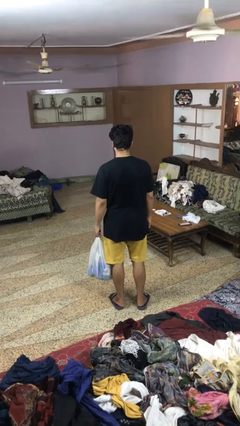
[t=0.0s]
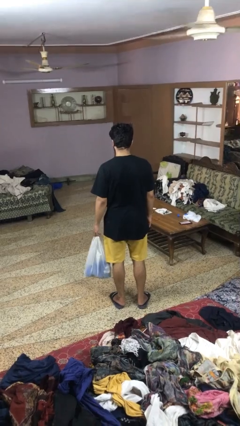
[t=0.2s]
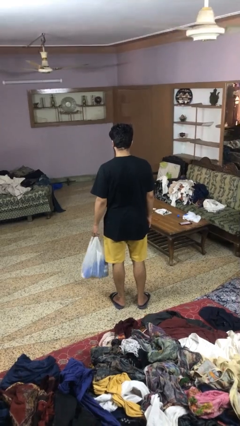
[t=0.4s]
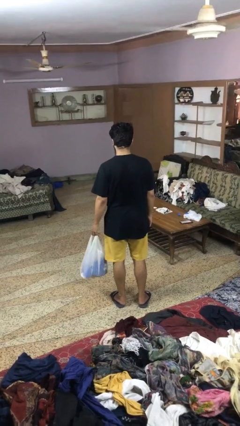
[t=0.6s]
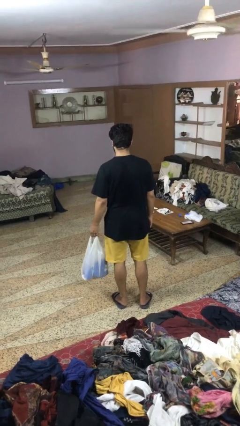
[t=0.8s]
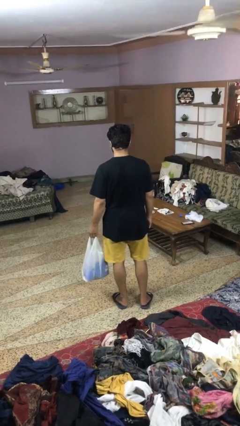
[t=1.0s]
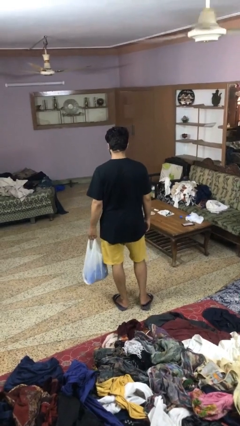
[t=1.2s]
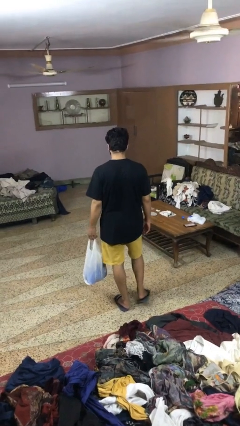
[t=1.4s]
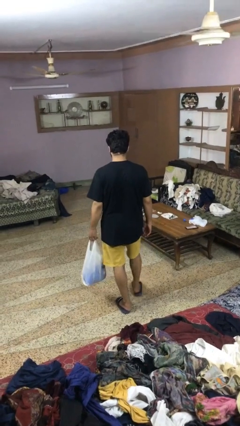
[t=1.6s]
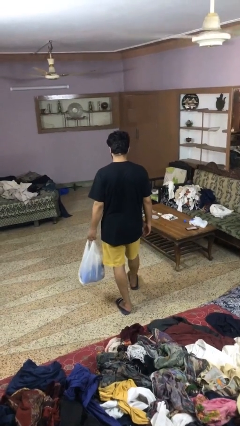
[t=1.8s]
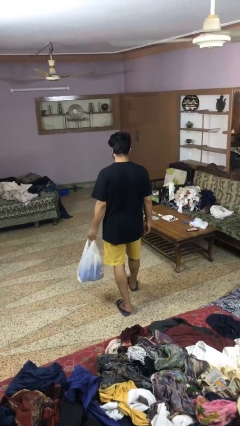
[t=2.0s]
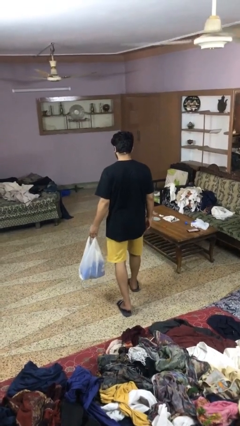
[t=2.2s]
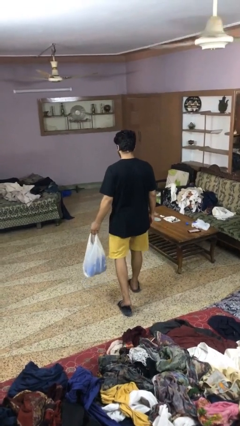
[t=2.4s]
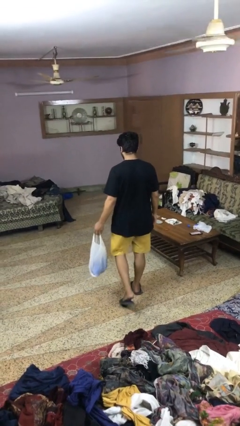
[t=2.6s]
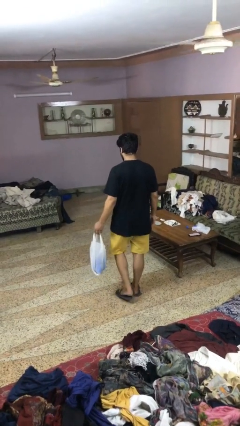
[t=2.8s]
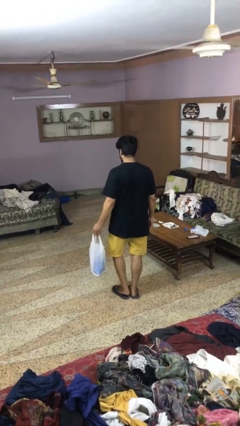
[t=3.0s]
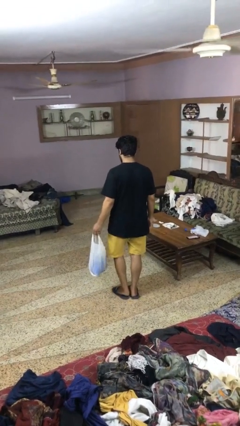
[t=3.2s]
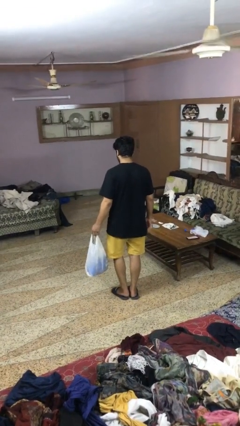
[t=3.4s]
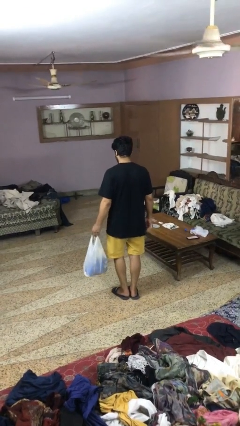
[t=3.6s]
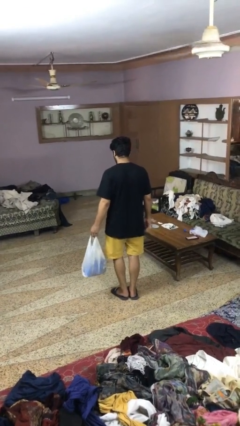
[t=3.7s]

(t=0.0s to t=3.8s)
person carries groceries

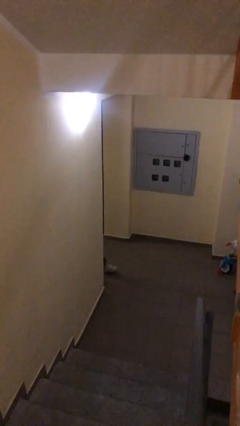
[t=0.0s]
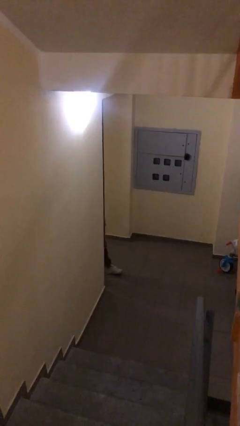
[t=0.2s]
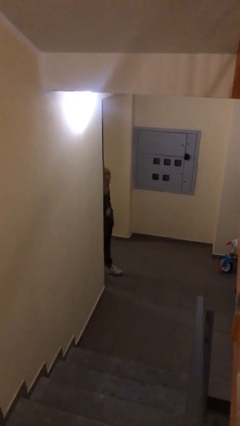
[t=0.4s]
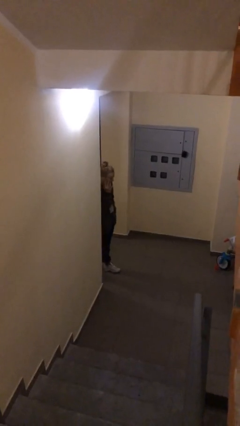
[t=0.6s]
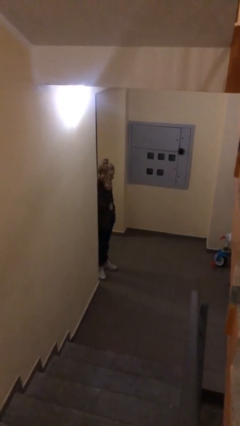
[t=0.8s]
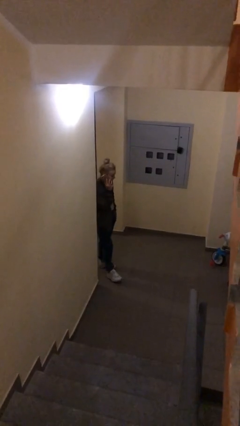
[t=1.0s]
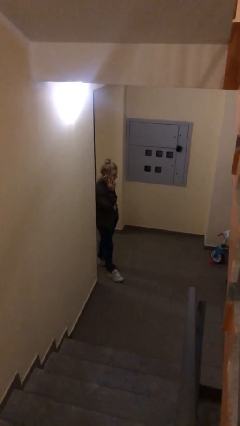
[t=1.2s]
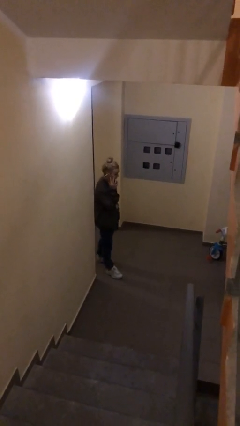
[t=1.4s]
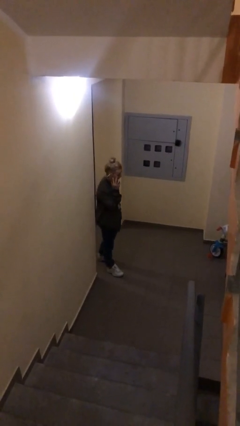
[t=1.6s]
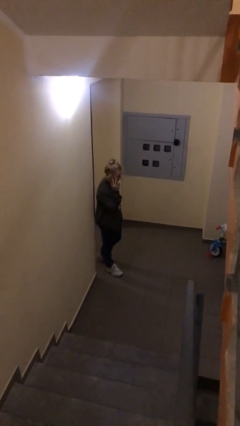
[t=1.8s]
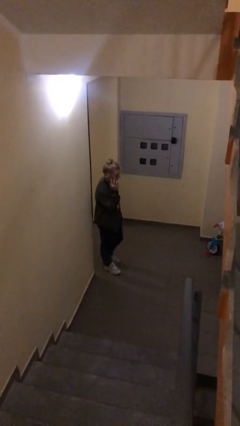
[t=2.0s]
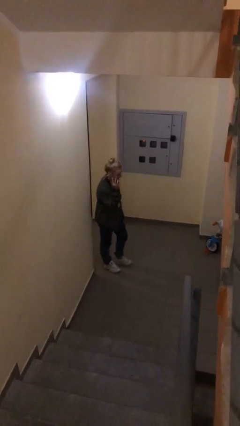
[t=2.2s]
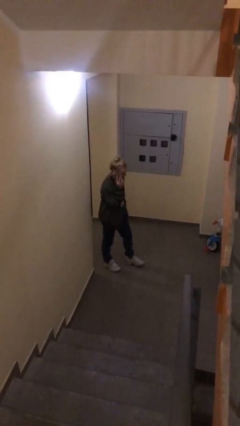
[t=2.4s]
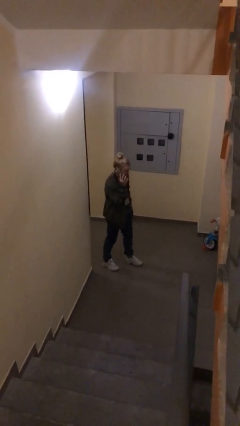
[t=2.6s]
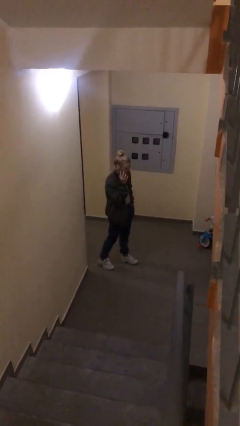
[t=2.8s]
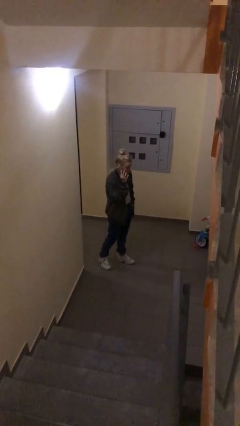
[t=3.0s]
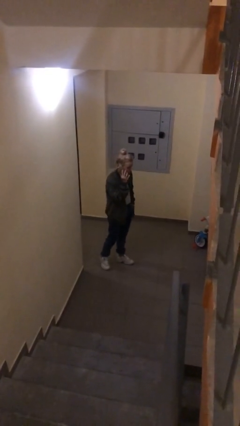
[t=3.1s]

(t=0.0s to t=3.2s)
person enters scene through structure

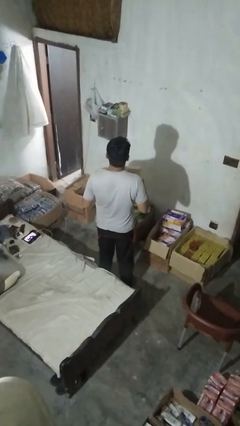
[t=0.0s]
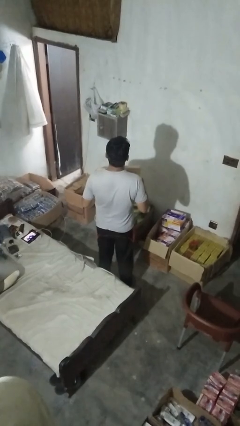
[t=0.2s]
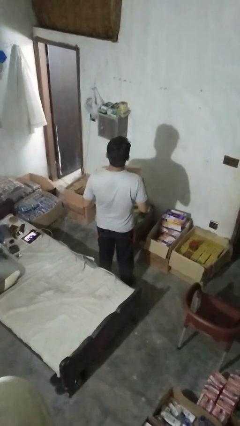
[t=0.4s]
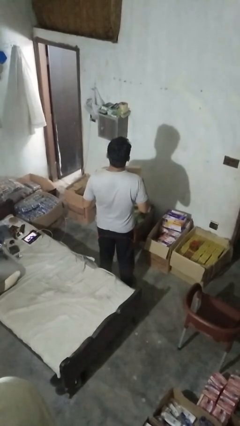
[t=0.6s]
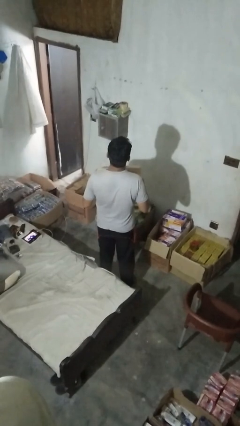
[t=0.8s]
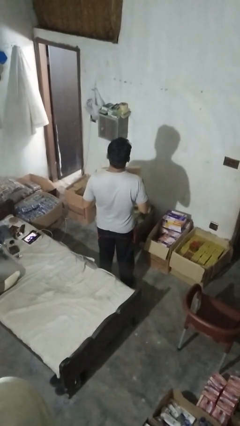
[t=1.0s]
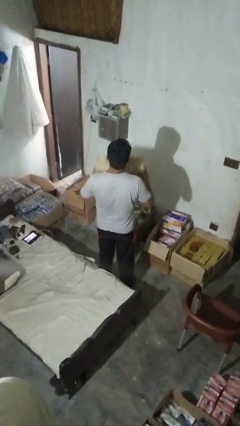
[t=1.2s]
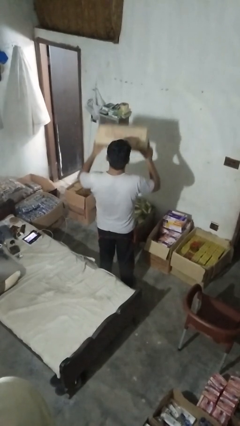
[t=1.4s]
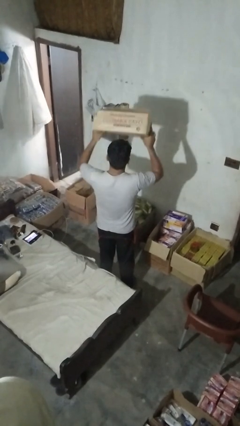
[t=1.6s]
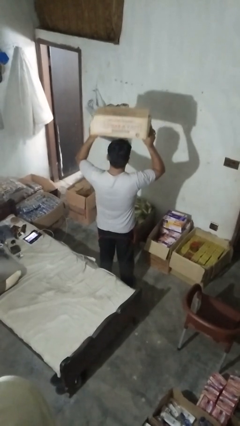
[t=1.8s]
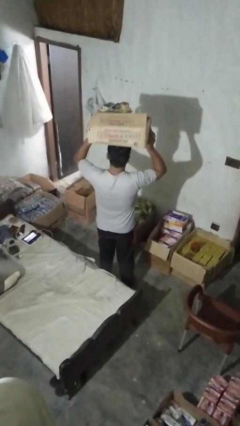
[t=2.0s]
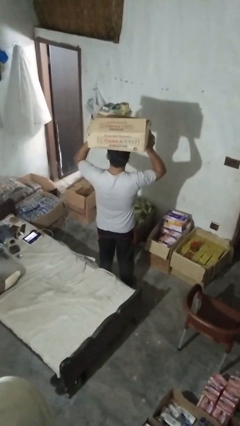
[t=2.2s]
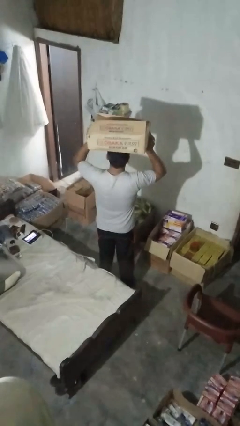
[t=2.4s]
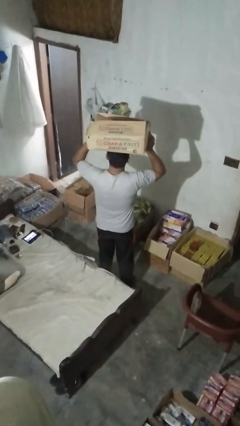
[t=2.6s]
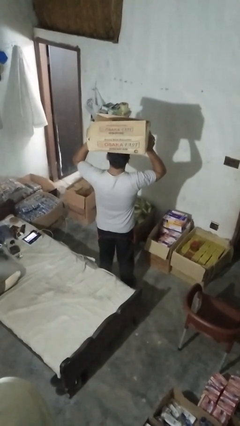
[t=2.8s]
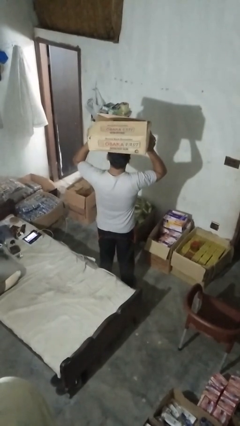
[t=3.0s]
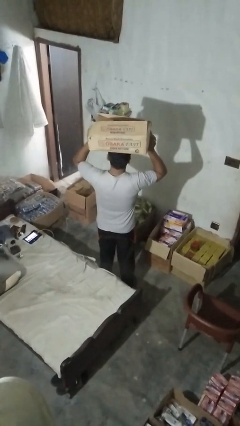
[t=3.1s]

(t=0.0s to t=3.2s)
person holds object above head

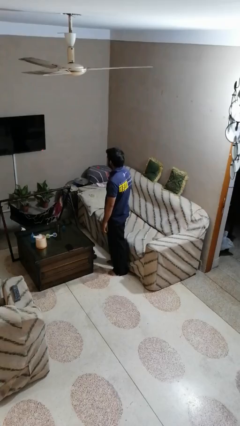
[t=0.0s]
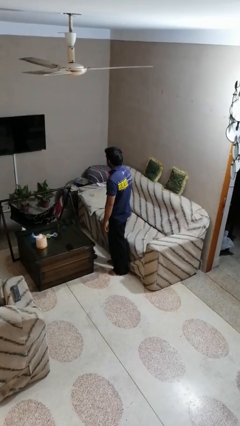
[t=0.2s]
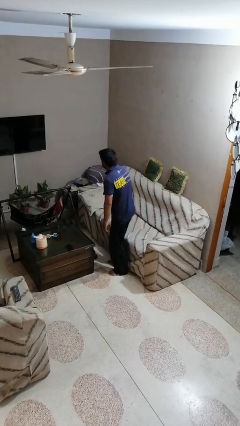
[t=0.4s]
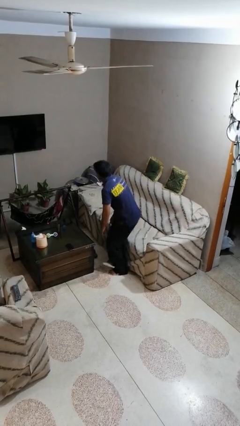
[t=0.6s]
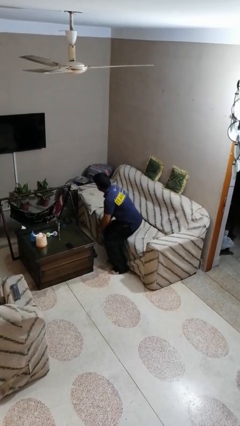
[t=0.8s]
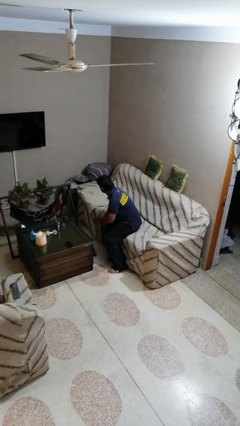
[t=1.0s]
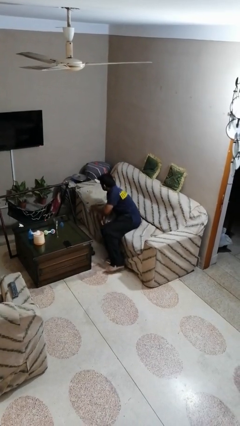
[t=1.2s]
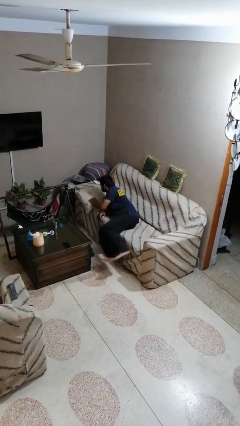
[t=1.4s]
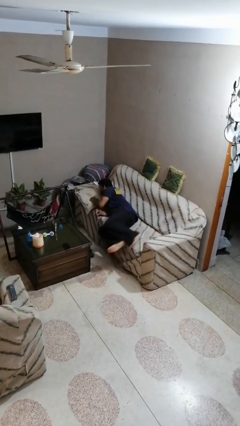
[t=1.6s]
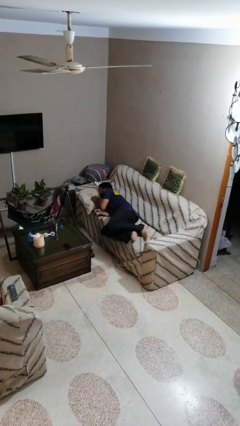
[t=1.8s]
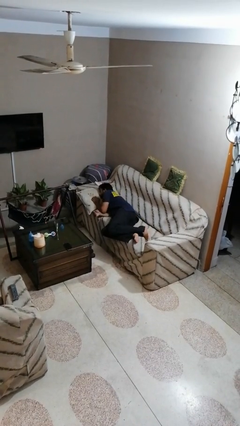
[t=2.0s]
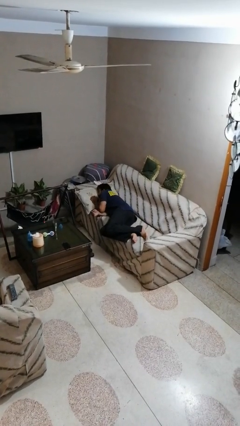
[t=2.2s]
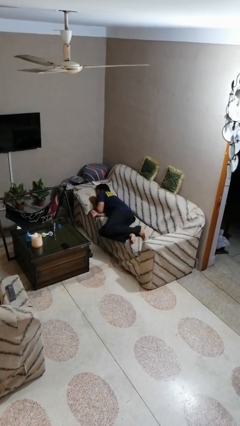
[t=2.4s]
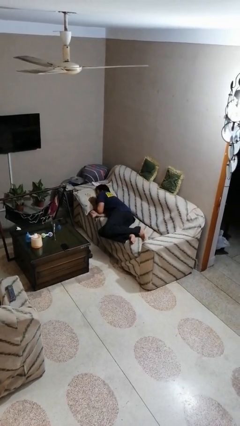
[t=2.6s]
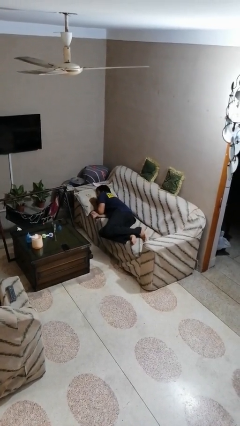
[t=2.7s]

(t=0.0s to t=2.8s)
person lies down on couch

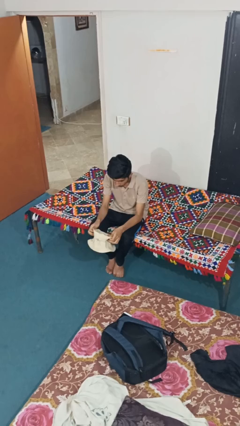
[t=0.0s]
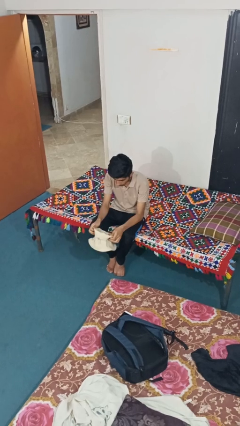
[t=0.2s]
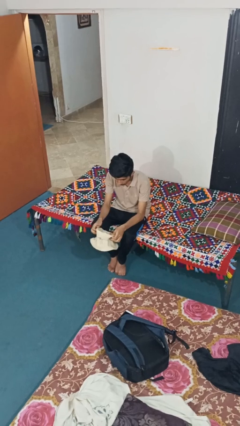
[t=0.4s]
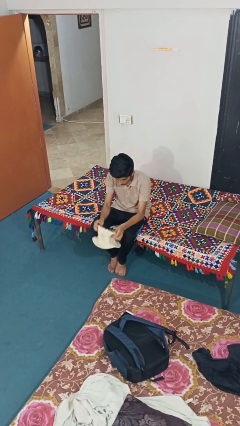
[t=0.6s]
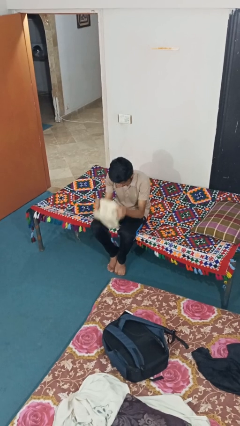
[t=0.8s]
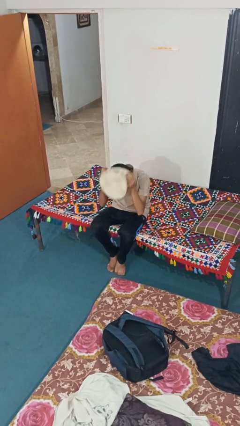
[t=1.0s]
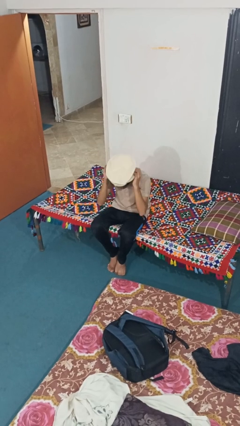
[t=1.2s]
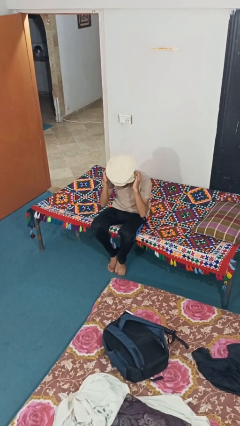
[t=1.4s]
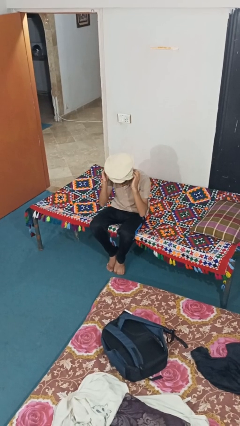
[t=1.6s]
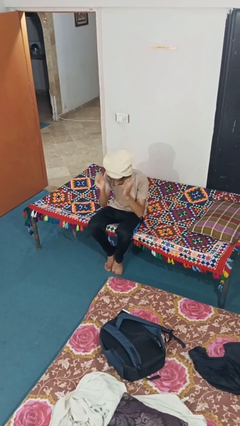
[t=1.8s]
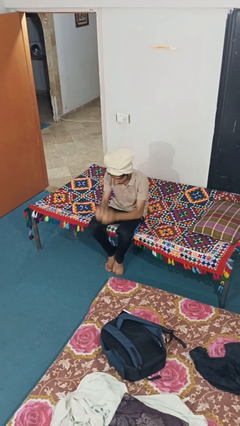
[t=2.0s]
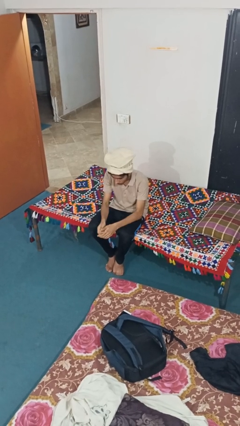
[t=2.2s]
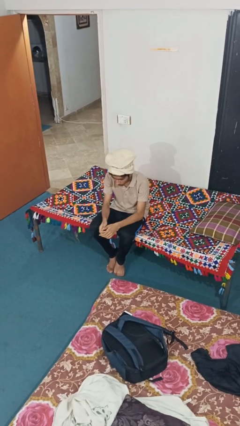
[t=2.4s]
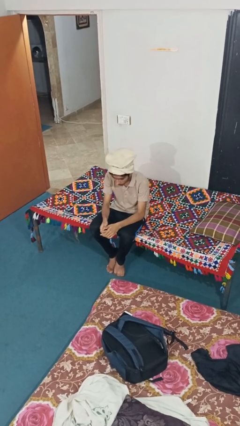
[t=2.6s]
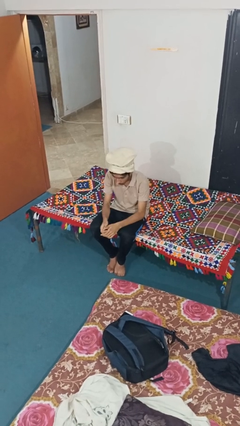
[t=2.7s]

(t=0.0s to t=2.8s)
person puts on hat

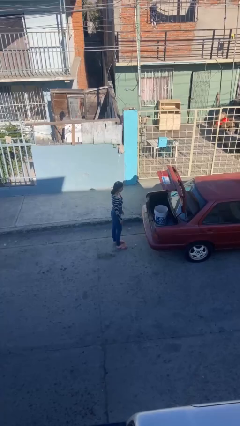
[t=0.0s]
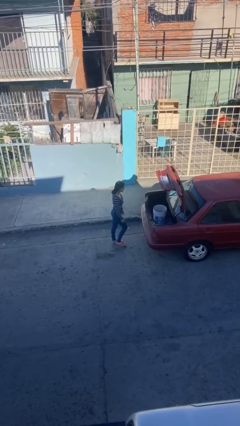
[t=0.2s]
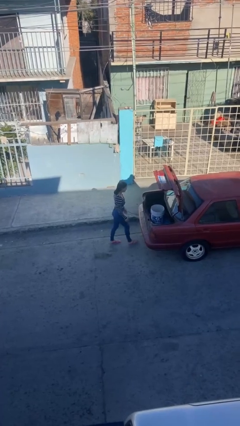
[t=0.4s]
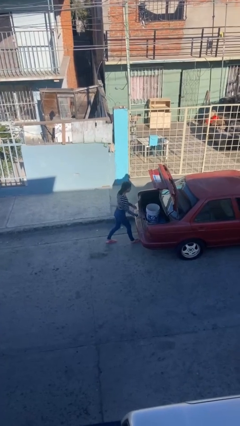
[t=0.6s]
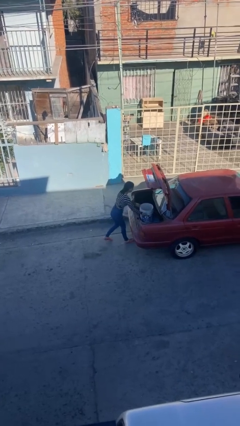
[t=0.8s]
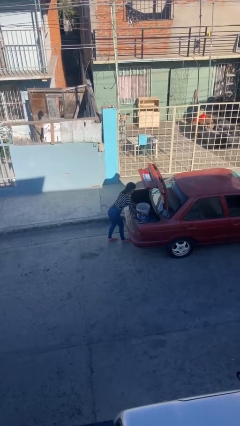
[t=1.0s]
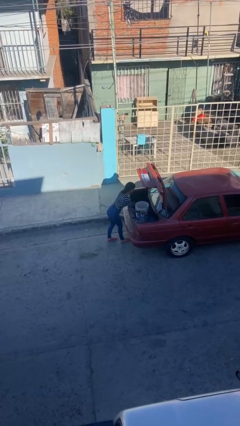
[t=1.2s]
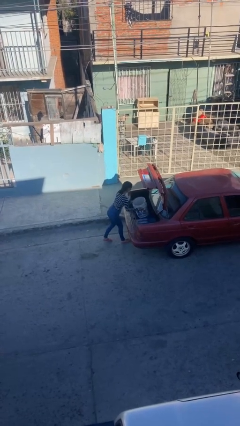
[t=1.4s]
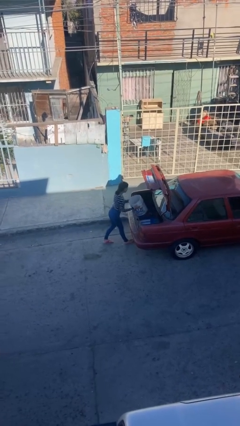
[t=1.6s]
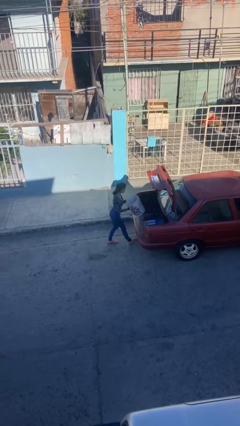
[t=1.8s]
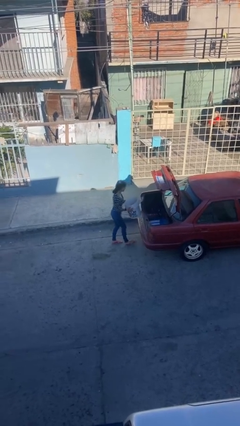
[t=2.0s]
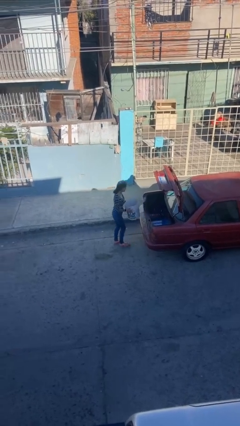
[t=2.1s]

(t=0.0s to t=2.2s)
person unloads car
